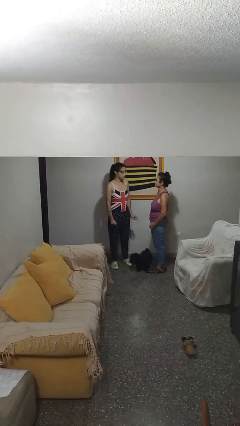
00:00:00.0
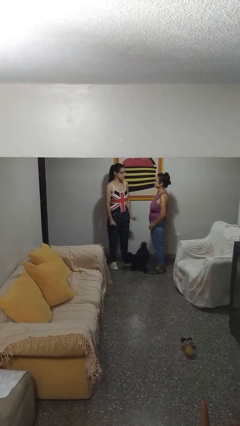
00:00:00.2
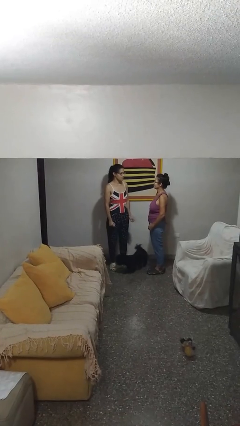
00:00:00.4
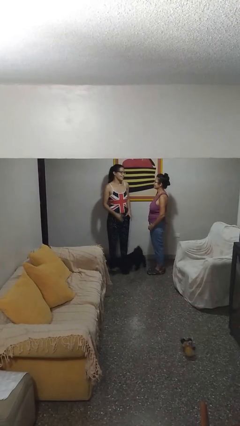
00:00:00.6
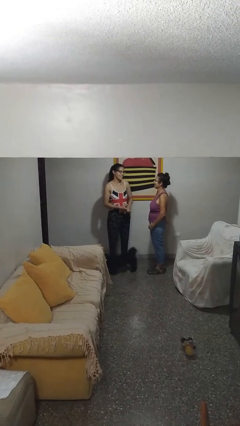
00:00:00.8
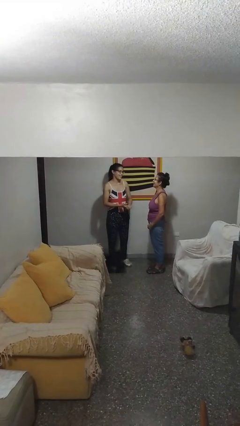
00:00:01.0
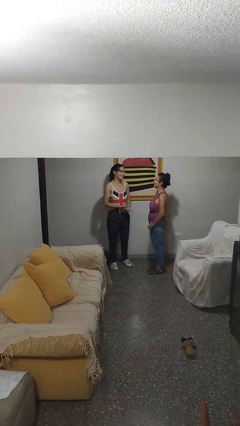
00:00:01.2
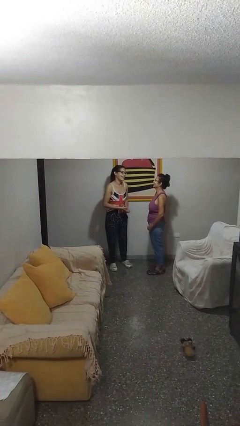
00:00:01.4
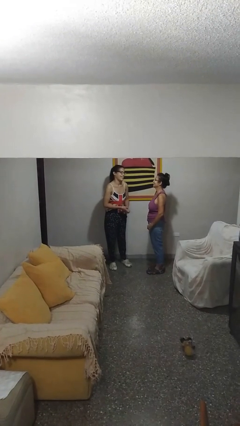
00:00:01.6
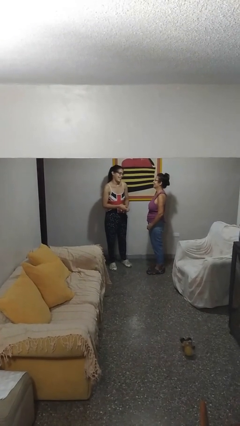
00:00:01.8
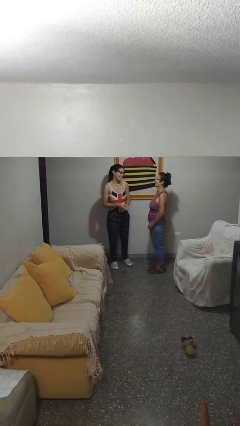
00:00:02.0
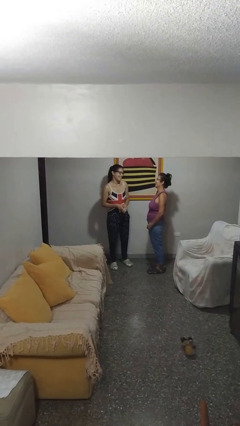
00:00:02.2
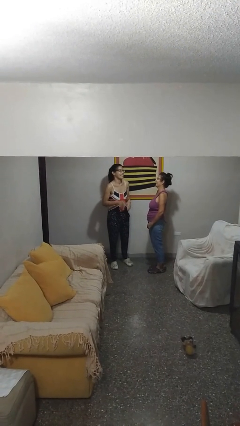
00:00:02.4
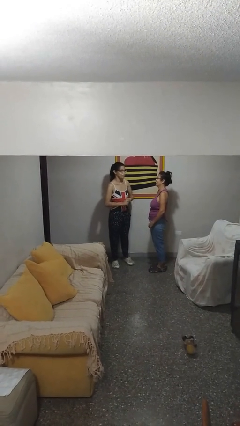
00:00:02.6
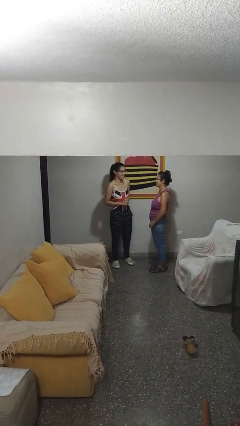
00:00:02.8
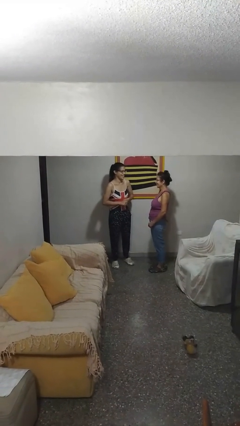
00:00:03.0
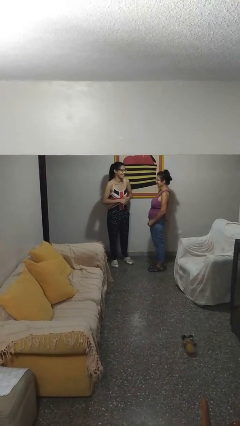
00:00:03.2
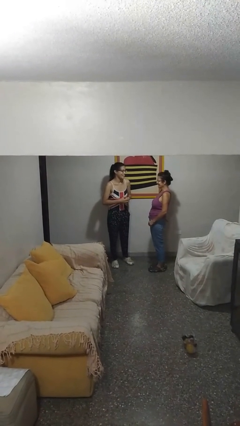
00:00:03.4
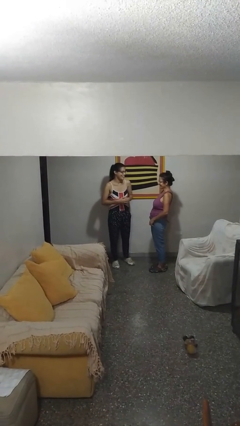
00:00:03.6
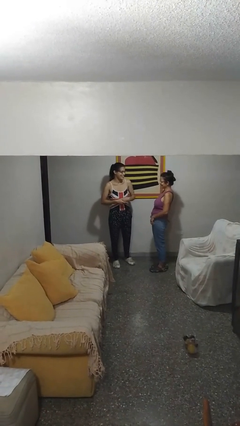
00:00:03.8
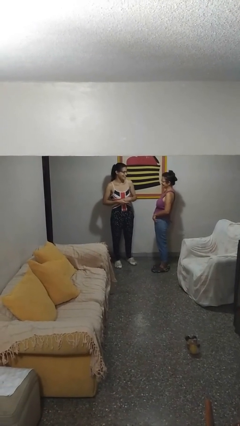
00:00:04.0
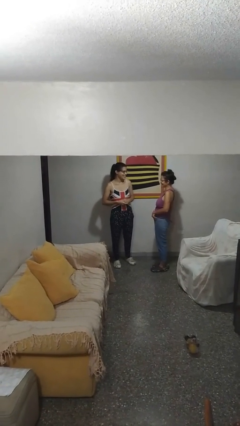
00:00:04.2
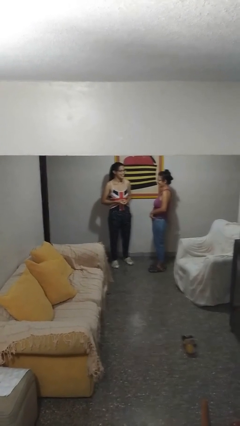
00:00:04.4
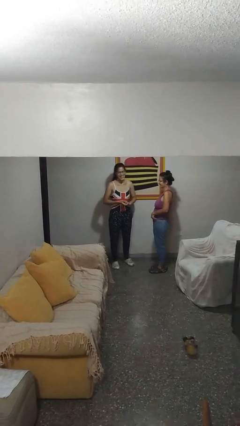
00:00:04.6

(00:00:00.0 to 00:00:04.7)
person laughs with person

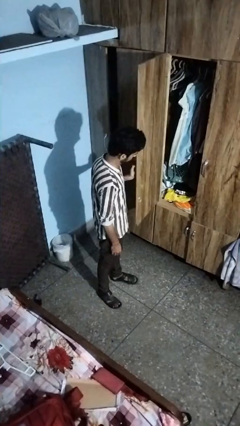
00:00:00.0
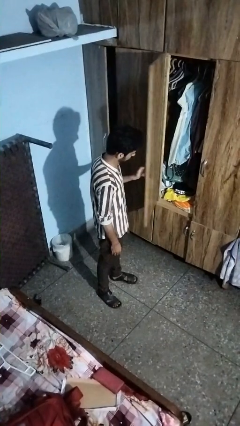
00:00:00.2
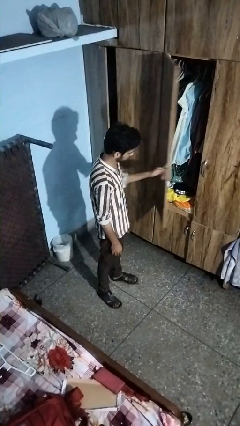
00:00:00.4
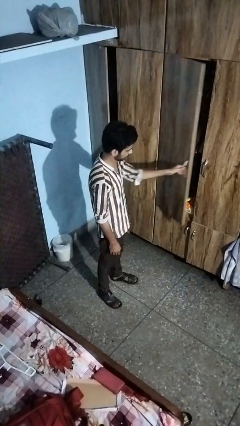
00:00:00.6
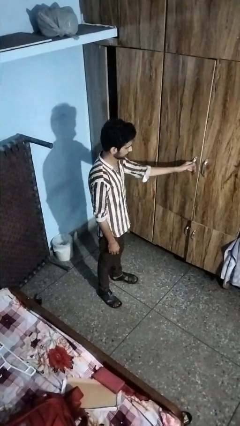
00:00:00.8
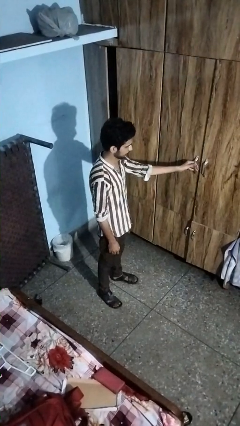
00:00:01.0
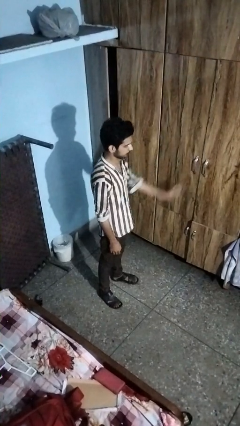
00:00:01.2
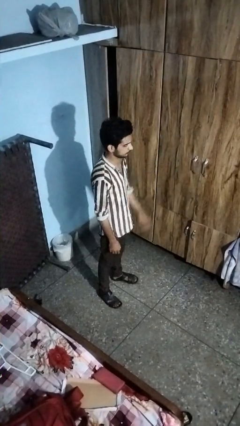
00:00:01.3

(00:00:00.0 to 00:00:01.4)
person closes closet door

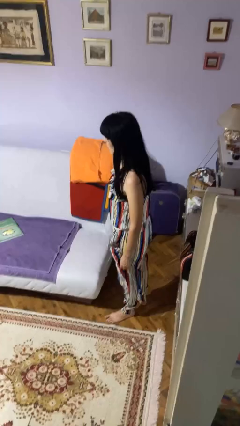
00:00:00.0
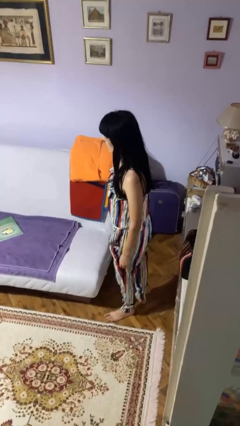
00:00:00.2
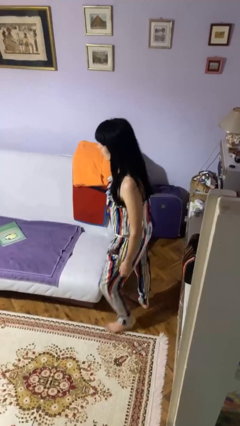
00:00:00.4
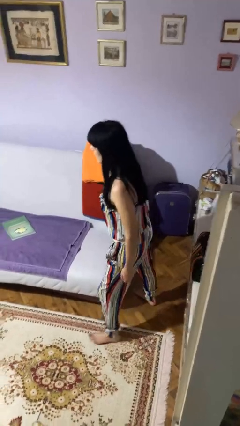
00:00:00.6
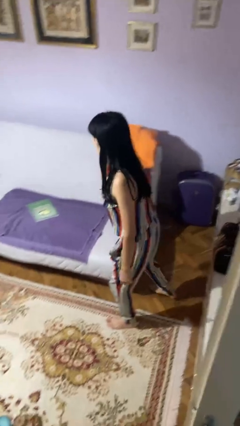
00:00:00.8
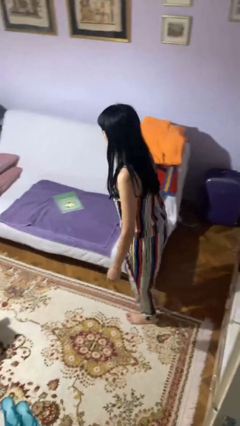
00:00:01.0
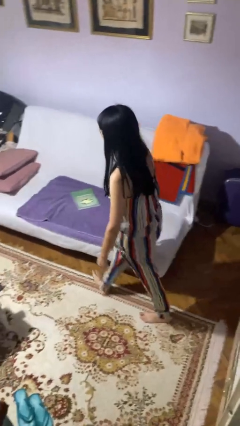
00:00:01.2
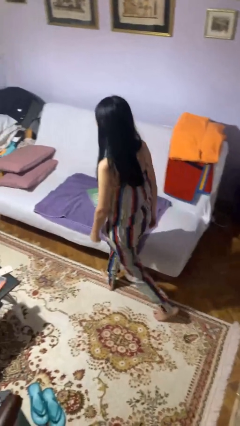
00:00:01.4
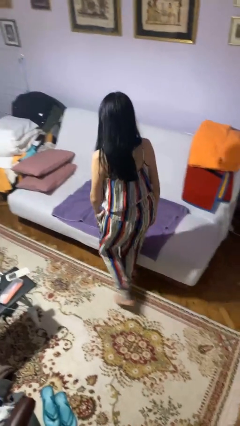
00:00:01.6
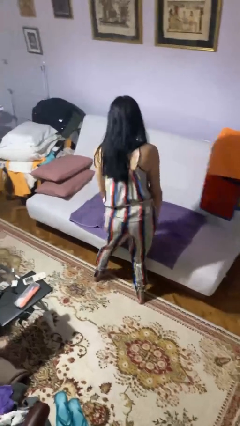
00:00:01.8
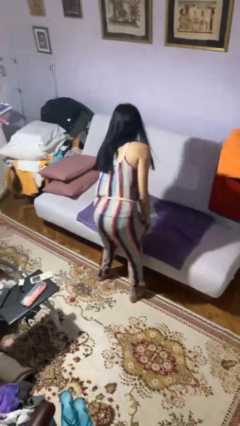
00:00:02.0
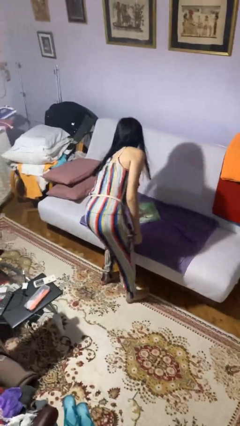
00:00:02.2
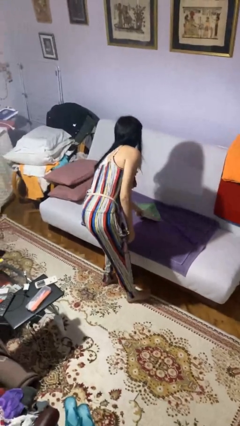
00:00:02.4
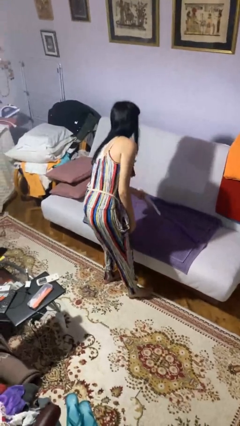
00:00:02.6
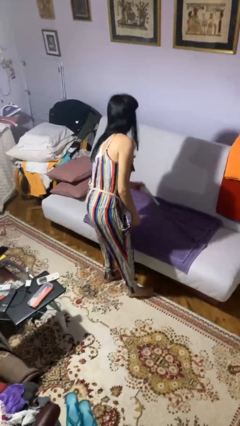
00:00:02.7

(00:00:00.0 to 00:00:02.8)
person picks up object from bed

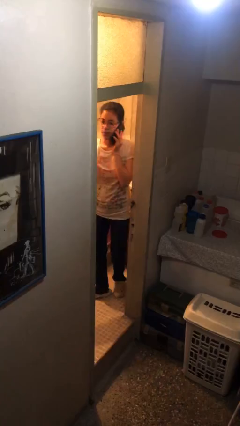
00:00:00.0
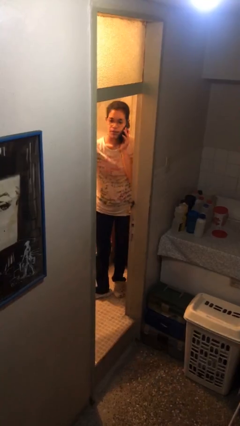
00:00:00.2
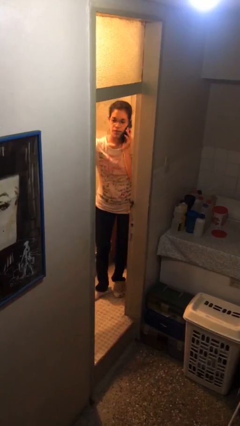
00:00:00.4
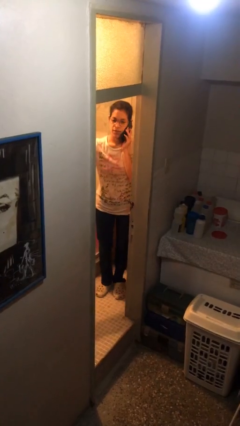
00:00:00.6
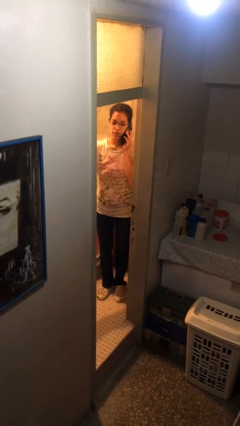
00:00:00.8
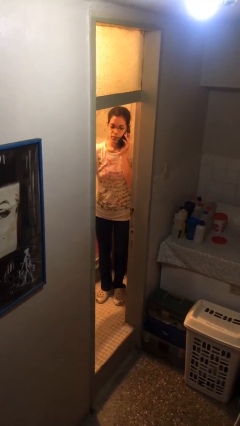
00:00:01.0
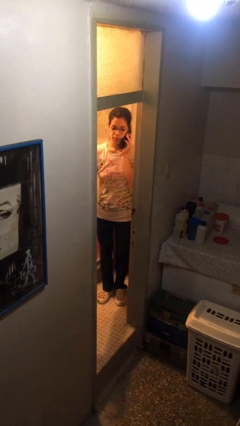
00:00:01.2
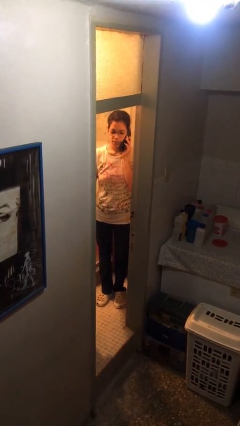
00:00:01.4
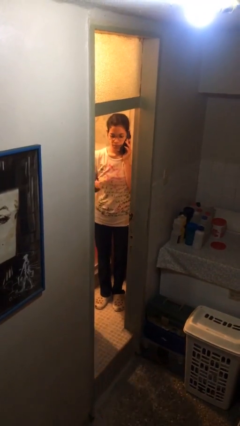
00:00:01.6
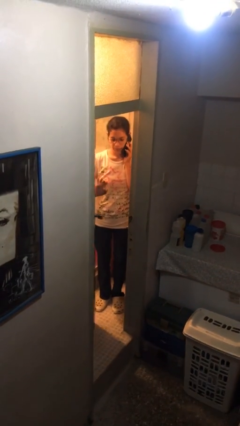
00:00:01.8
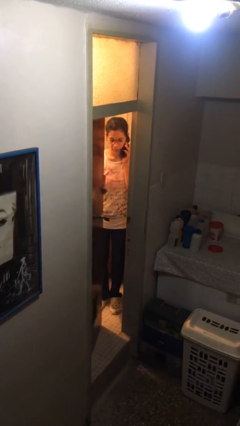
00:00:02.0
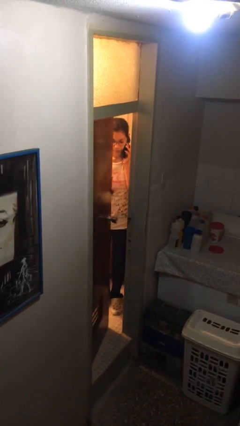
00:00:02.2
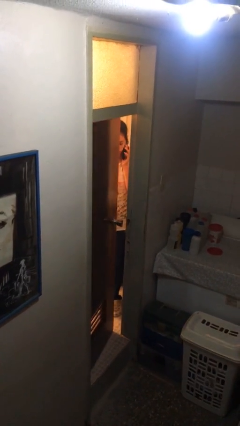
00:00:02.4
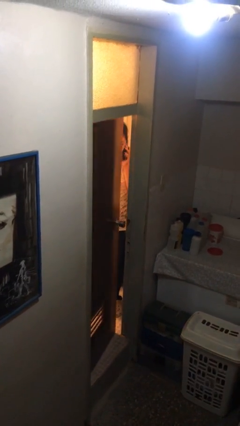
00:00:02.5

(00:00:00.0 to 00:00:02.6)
person closes facility door

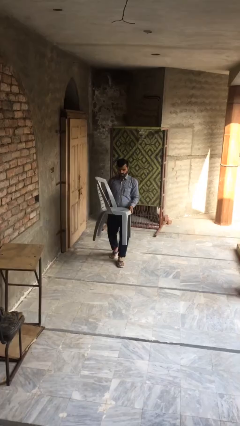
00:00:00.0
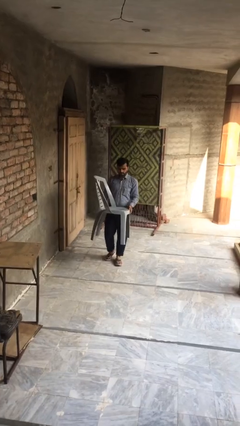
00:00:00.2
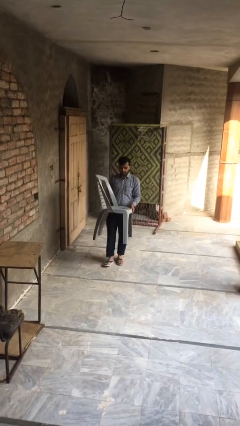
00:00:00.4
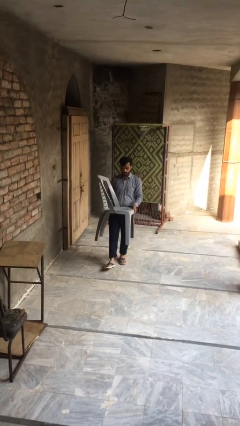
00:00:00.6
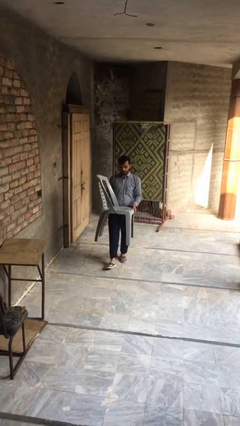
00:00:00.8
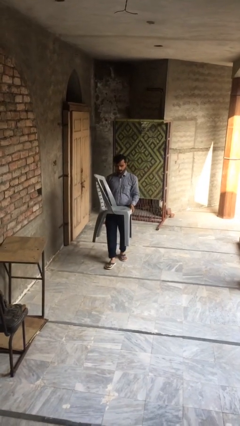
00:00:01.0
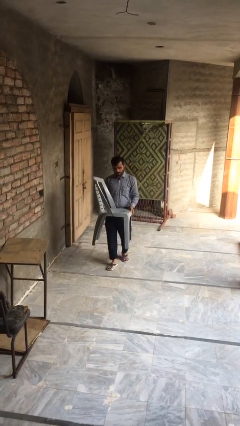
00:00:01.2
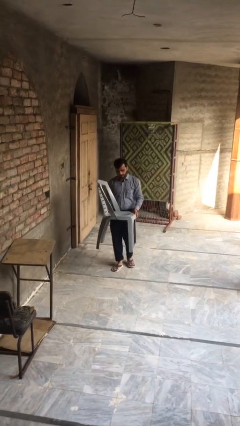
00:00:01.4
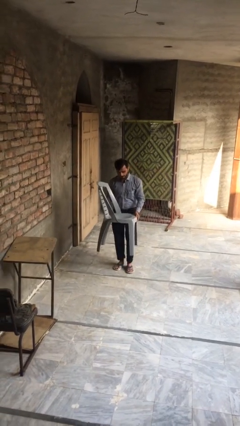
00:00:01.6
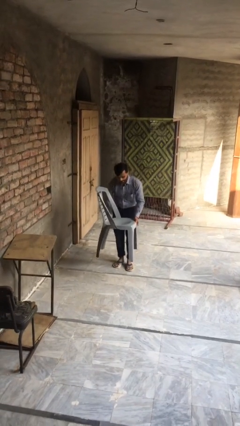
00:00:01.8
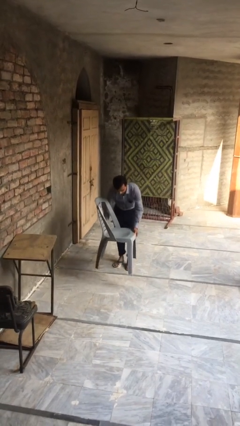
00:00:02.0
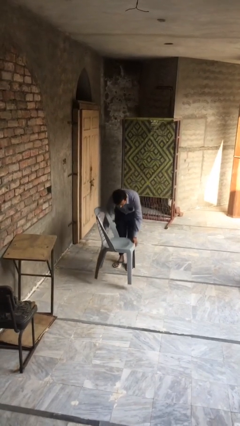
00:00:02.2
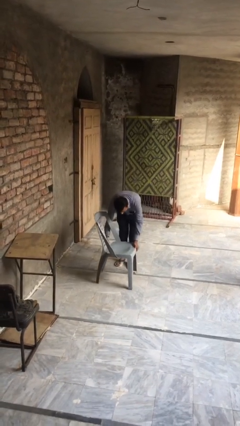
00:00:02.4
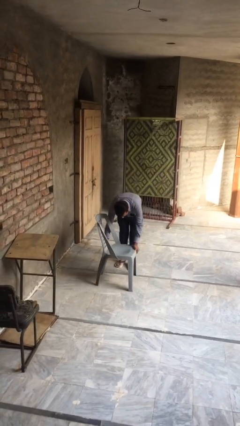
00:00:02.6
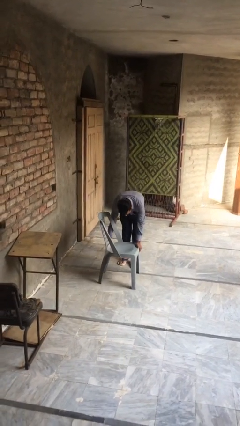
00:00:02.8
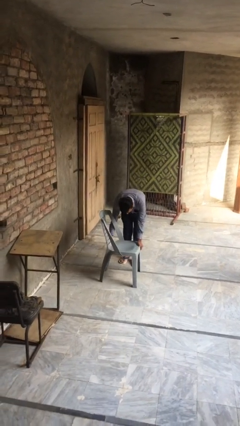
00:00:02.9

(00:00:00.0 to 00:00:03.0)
person puts down object on floor

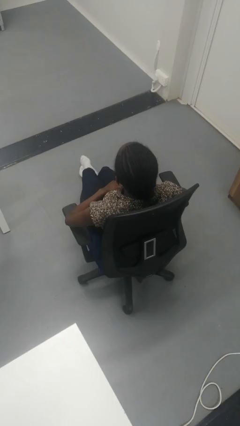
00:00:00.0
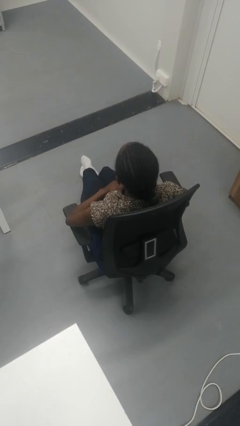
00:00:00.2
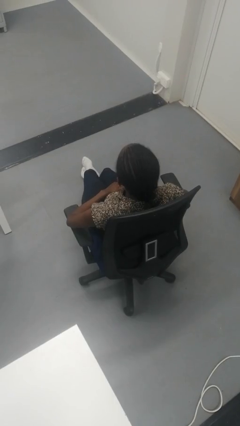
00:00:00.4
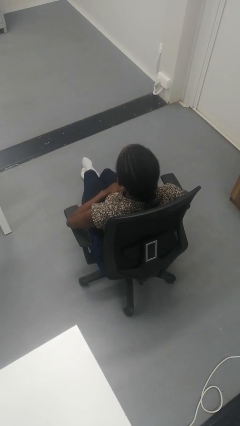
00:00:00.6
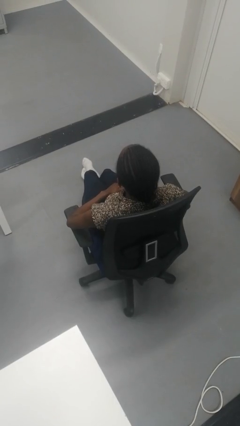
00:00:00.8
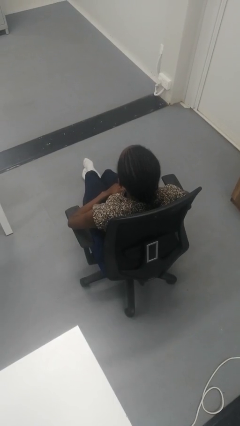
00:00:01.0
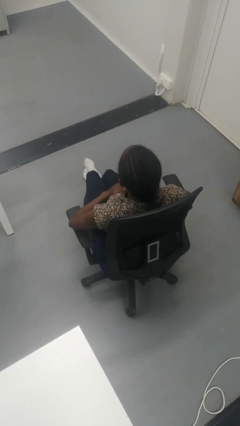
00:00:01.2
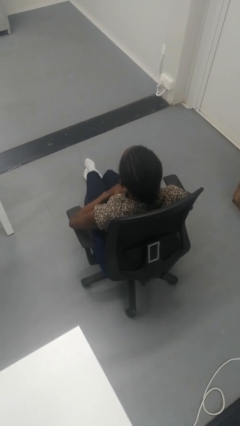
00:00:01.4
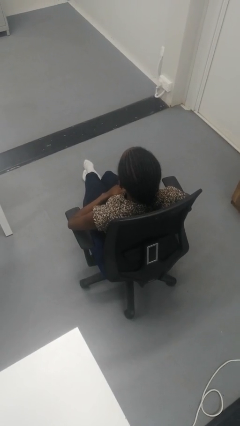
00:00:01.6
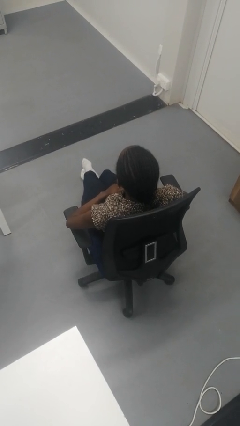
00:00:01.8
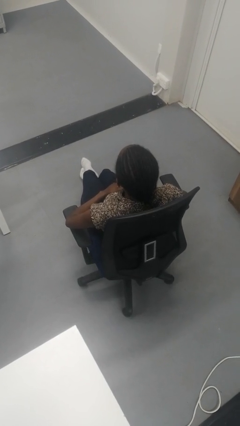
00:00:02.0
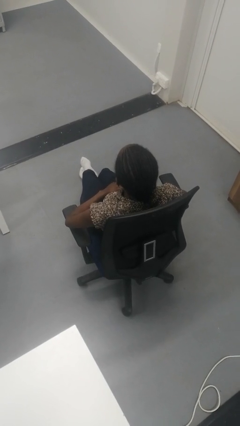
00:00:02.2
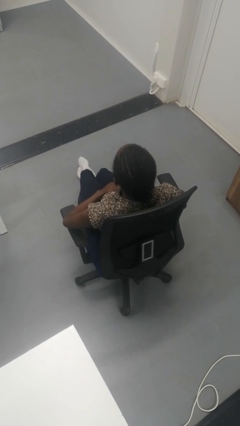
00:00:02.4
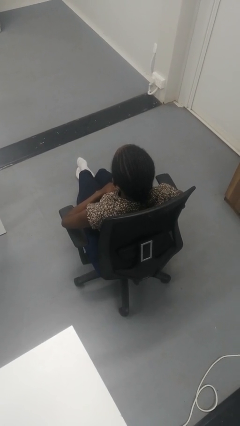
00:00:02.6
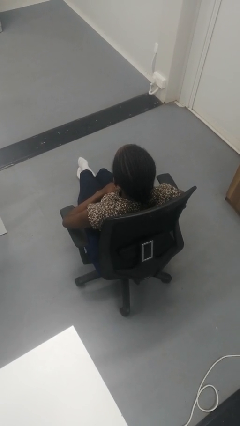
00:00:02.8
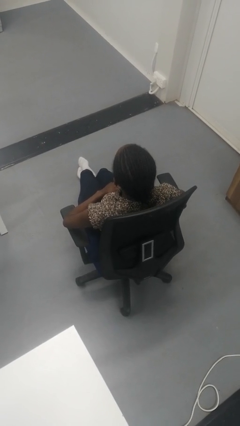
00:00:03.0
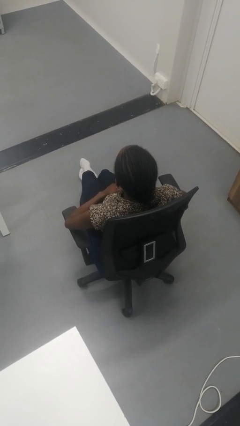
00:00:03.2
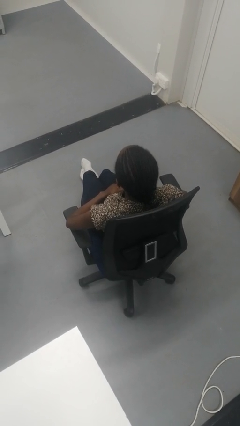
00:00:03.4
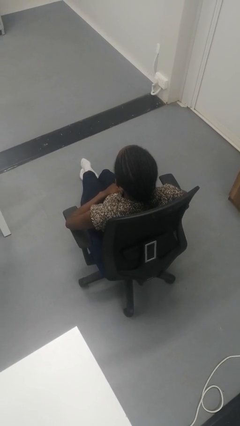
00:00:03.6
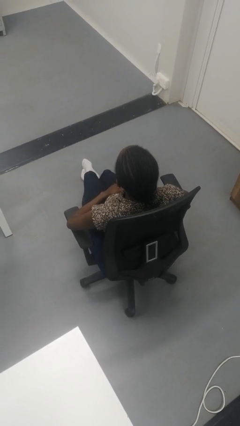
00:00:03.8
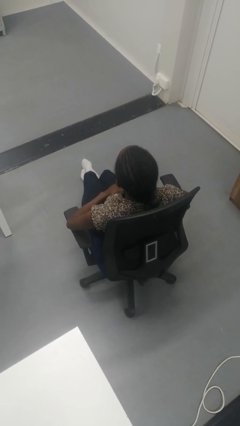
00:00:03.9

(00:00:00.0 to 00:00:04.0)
person crosses legs
